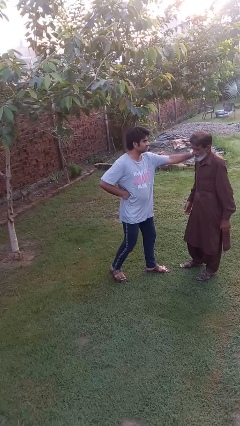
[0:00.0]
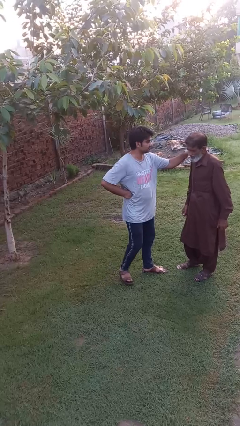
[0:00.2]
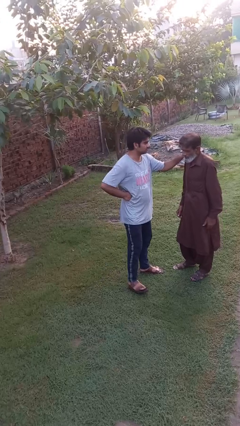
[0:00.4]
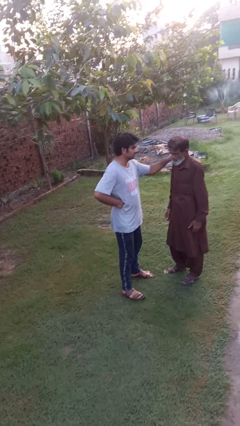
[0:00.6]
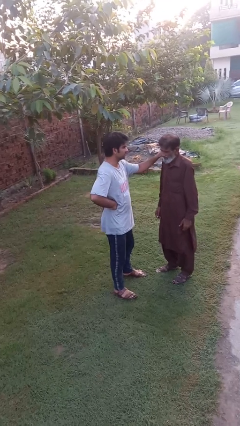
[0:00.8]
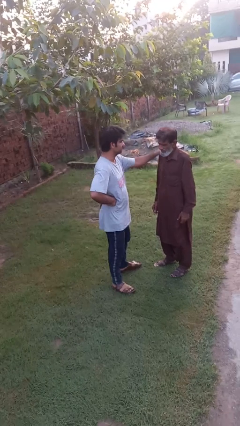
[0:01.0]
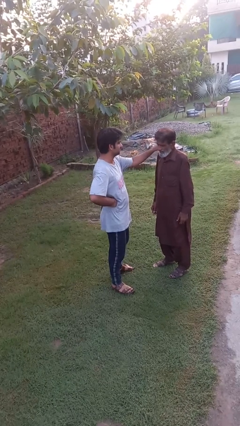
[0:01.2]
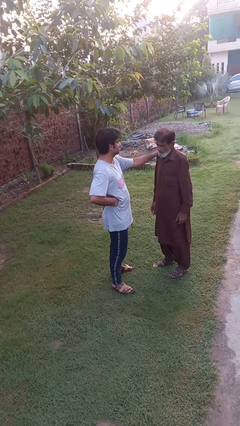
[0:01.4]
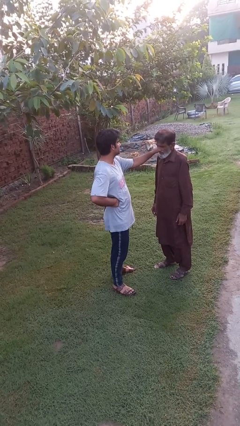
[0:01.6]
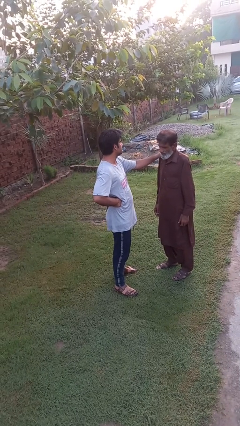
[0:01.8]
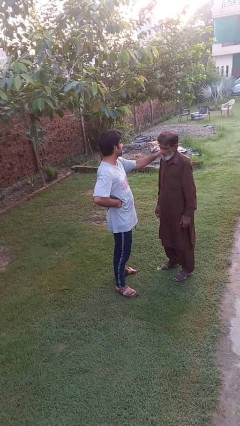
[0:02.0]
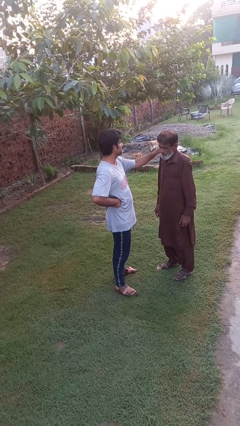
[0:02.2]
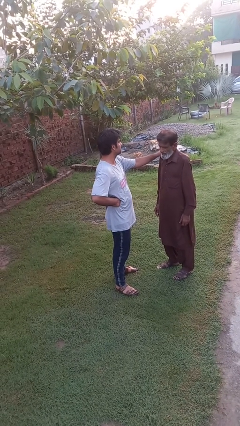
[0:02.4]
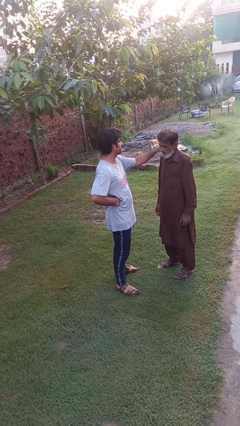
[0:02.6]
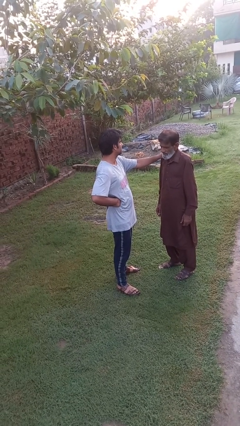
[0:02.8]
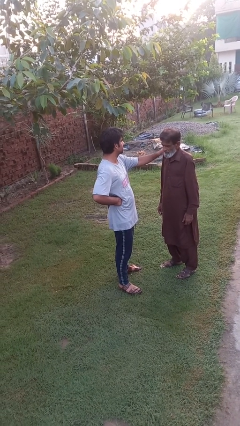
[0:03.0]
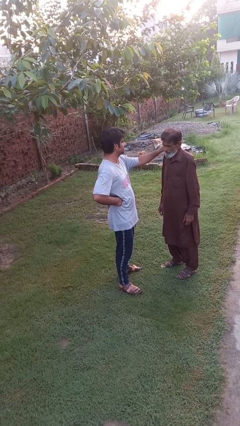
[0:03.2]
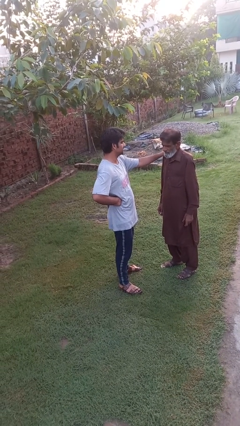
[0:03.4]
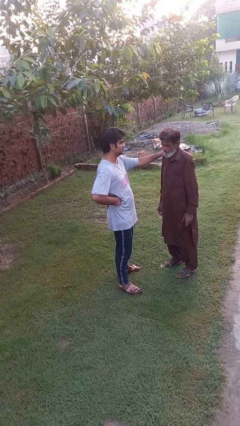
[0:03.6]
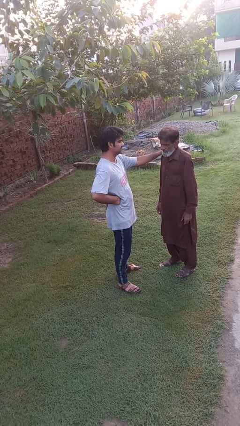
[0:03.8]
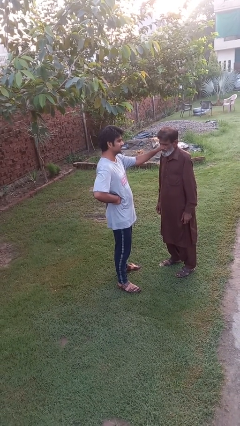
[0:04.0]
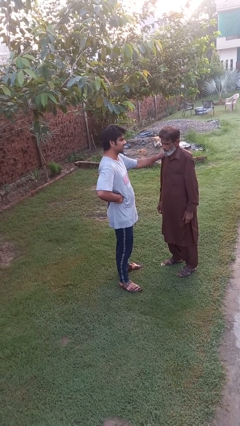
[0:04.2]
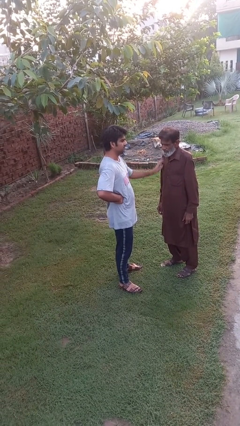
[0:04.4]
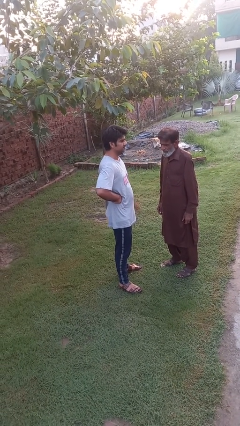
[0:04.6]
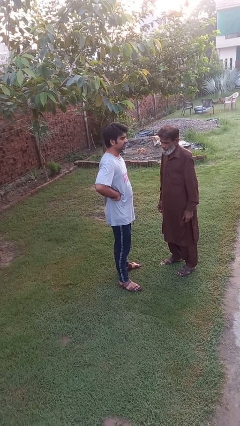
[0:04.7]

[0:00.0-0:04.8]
person pounds shoulders of person

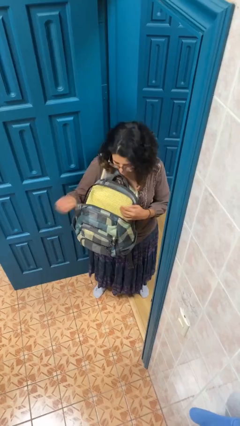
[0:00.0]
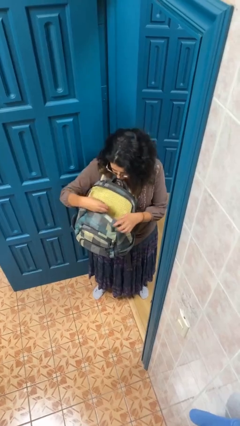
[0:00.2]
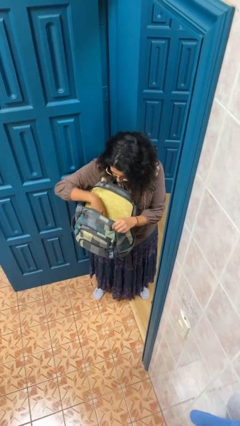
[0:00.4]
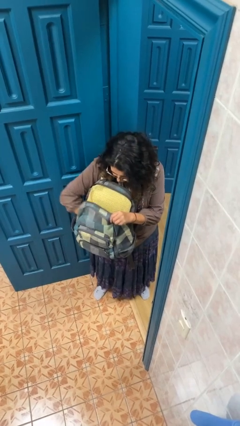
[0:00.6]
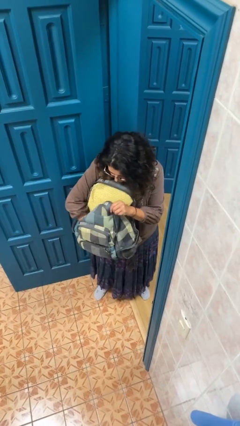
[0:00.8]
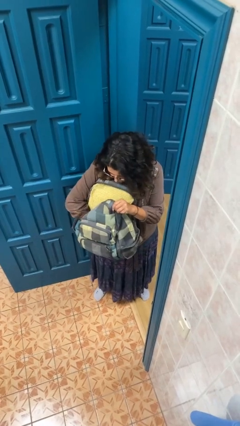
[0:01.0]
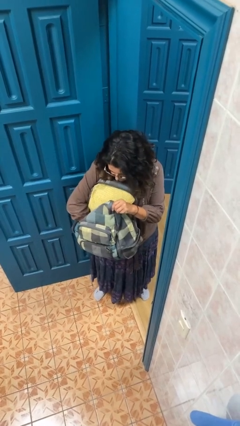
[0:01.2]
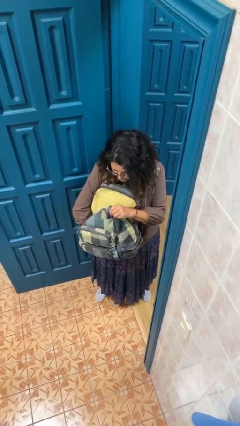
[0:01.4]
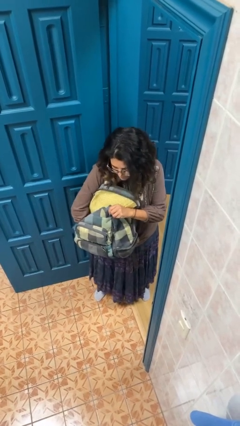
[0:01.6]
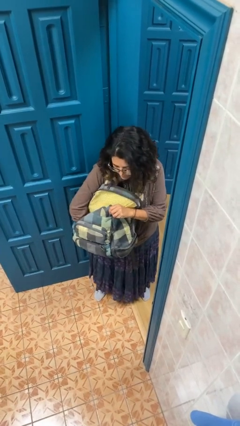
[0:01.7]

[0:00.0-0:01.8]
person searches in backpack

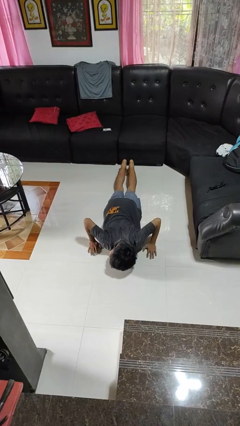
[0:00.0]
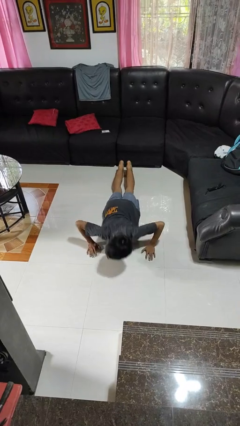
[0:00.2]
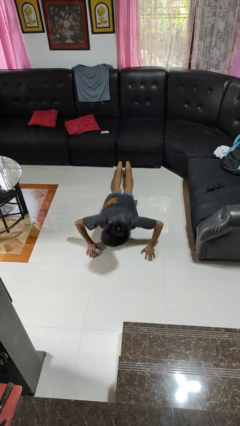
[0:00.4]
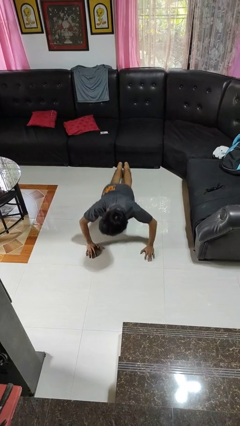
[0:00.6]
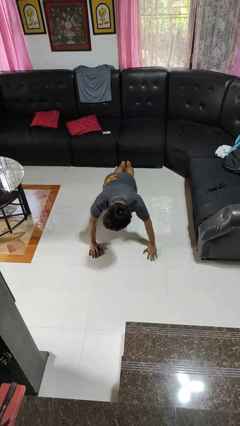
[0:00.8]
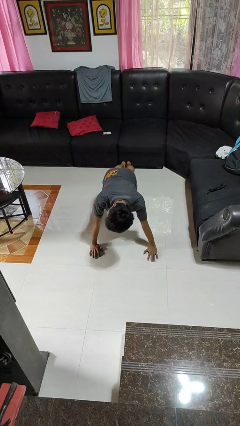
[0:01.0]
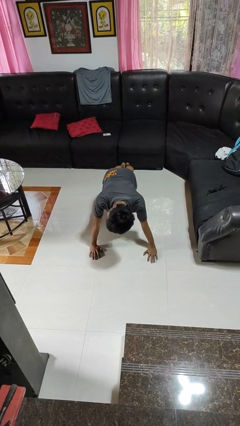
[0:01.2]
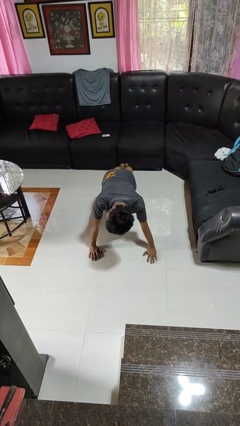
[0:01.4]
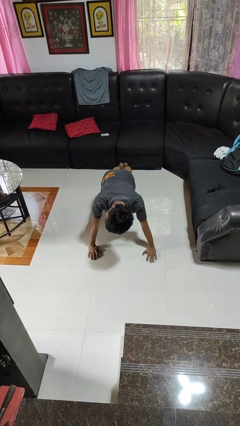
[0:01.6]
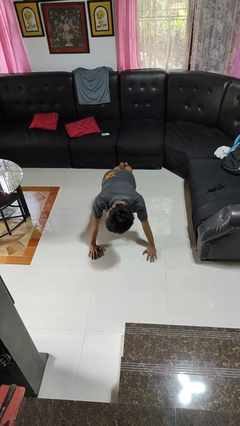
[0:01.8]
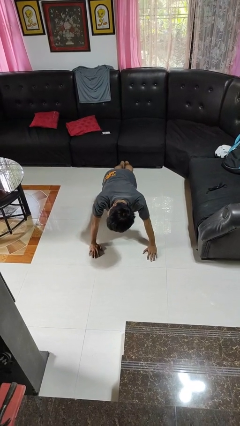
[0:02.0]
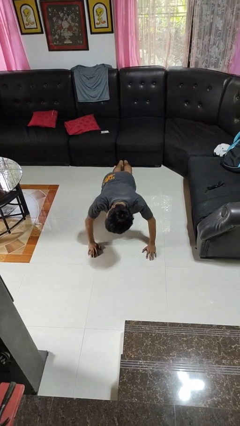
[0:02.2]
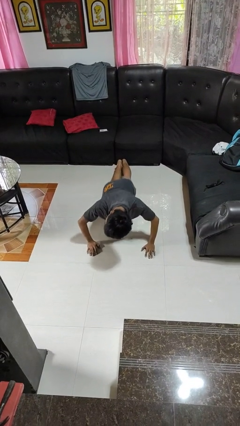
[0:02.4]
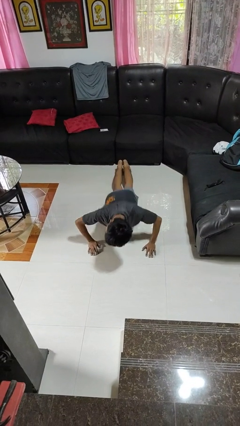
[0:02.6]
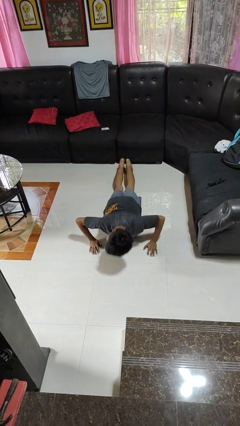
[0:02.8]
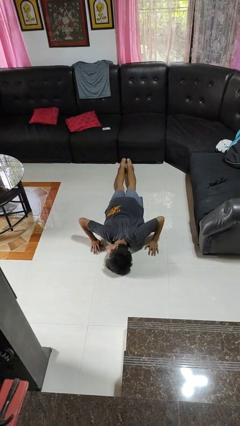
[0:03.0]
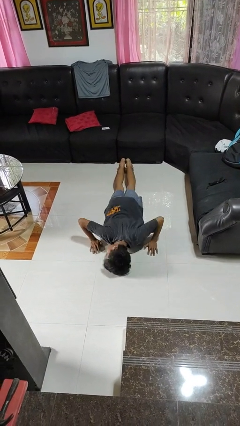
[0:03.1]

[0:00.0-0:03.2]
person exercises with pushup

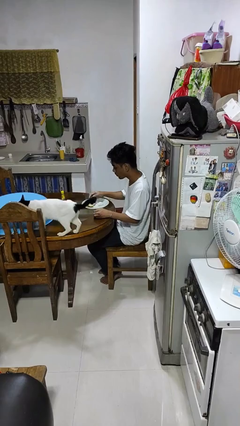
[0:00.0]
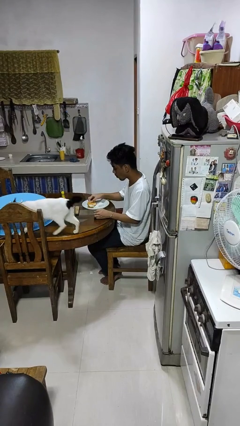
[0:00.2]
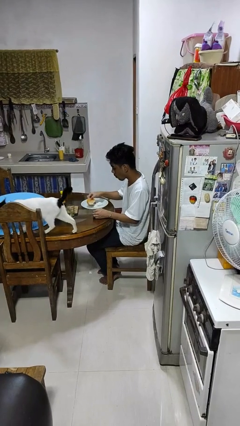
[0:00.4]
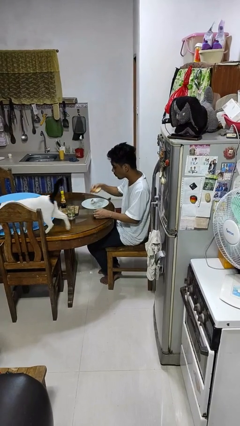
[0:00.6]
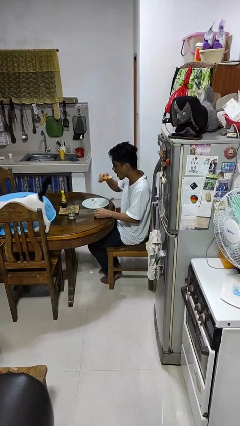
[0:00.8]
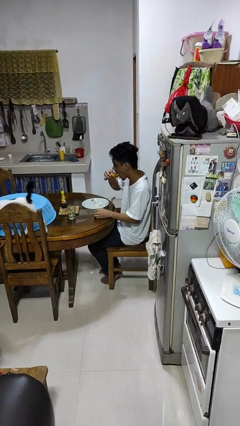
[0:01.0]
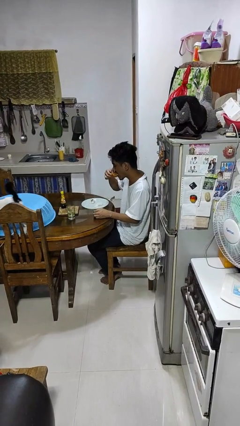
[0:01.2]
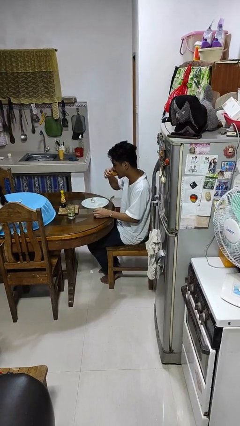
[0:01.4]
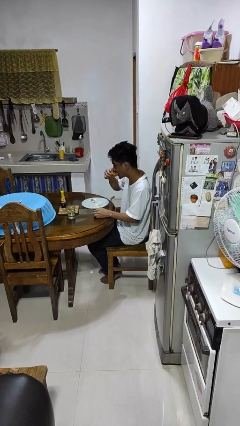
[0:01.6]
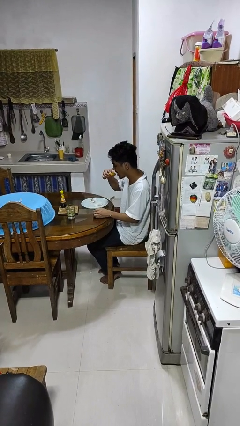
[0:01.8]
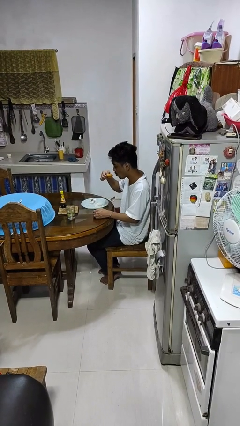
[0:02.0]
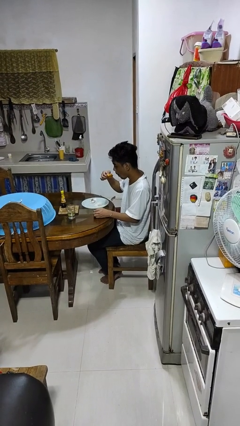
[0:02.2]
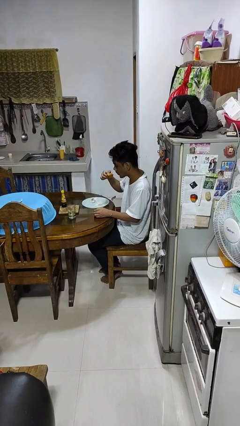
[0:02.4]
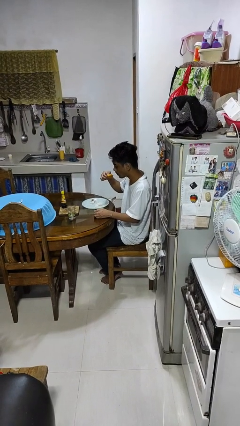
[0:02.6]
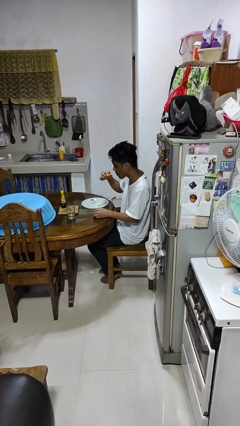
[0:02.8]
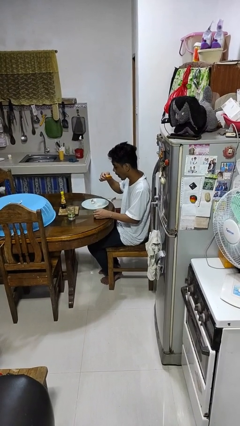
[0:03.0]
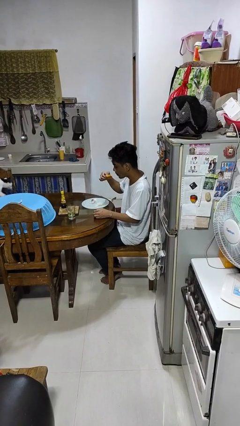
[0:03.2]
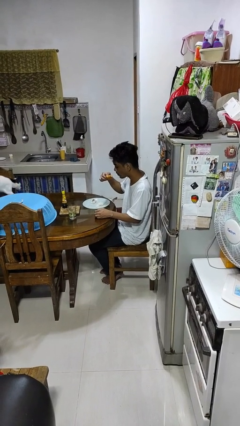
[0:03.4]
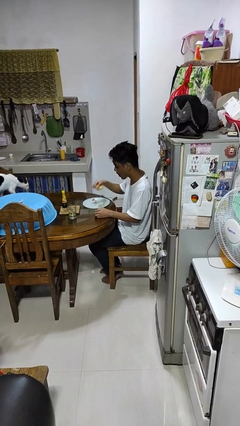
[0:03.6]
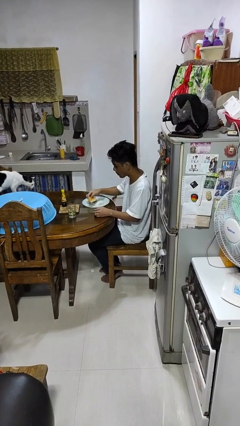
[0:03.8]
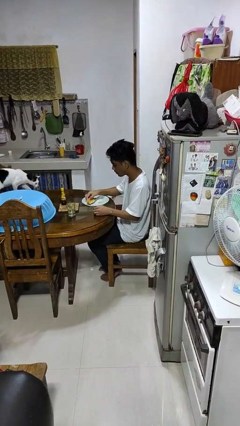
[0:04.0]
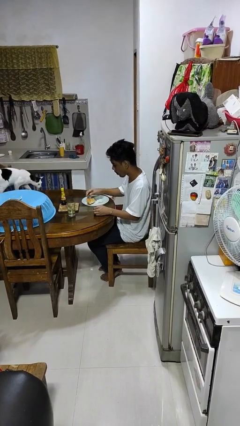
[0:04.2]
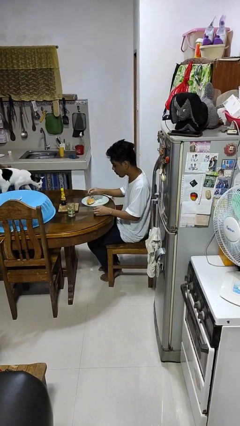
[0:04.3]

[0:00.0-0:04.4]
person eats with hands

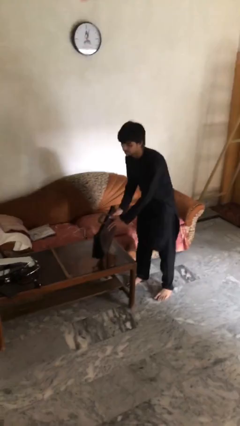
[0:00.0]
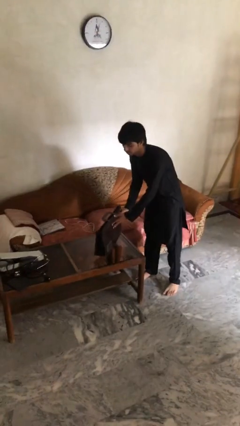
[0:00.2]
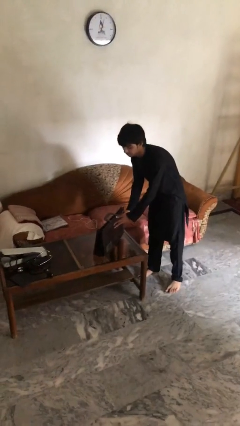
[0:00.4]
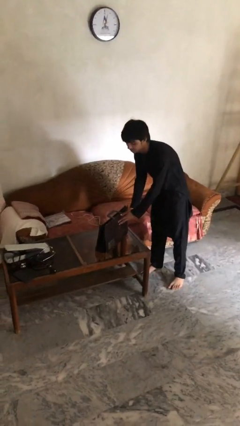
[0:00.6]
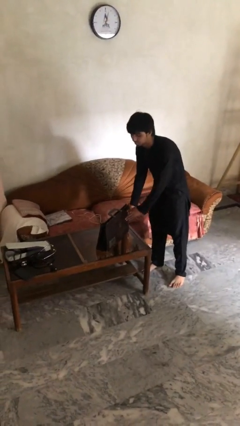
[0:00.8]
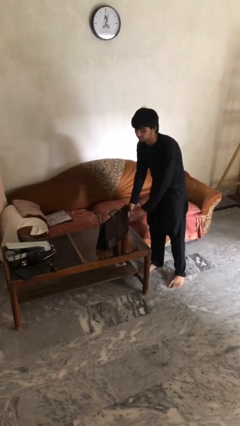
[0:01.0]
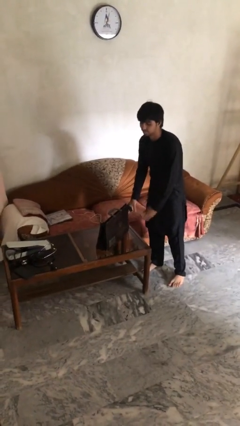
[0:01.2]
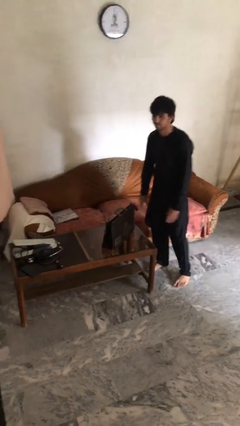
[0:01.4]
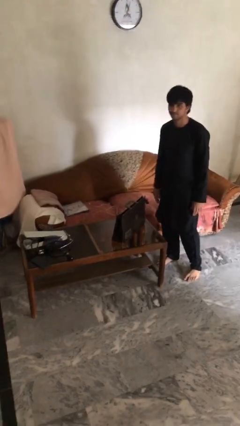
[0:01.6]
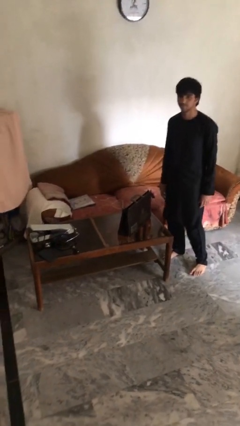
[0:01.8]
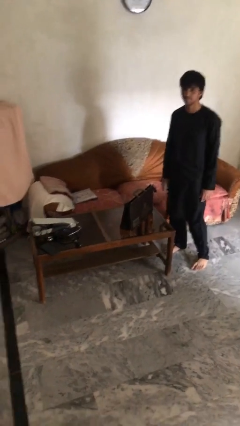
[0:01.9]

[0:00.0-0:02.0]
person puts down object on table

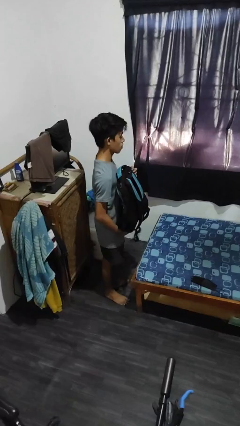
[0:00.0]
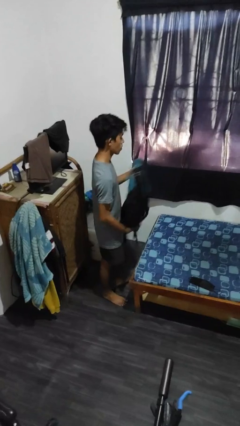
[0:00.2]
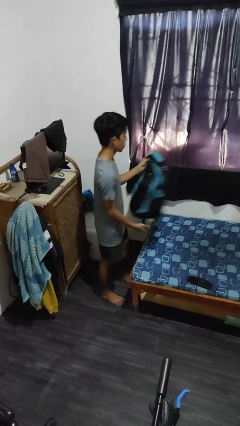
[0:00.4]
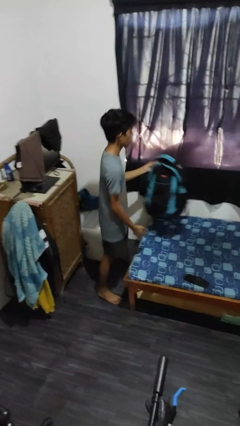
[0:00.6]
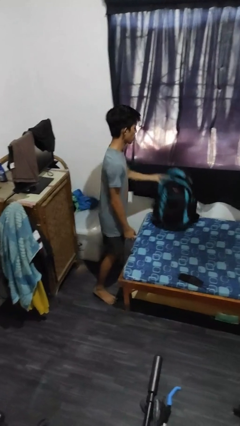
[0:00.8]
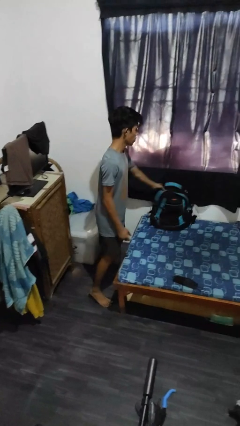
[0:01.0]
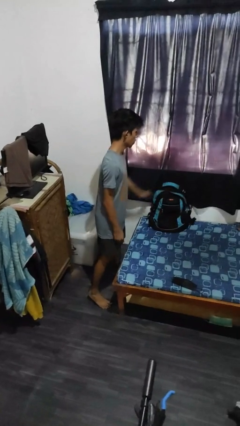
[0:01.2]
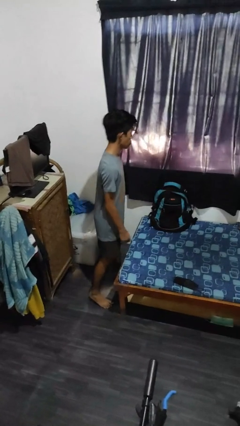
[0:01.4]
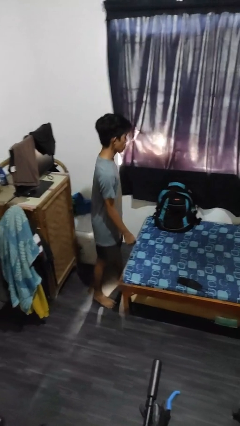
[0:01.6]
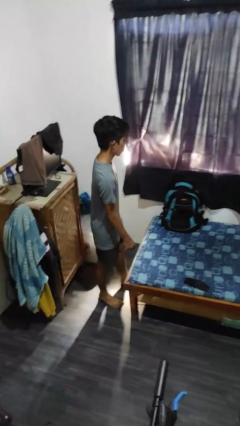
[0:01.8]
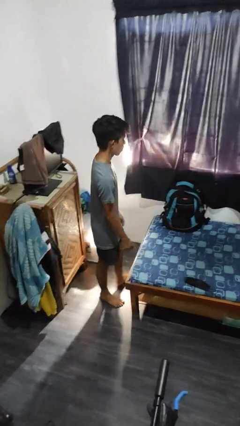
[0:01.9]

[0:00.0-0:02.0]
person puts down object on bed
